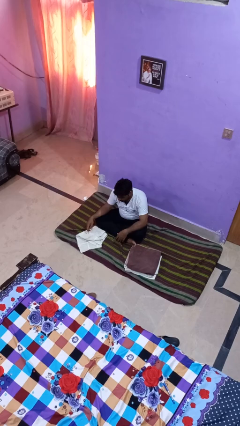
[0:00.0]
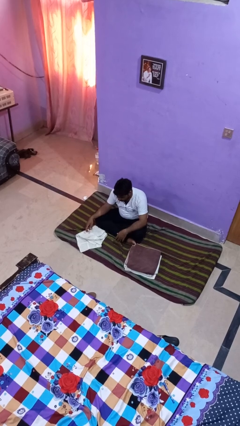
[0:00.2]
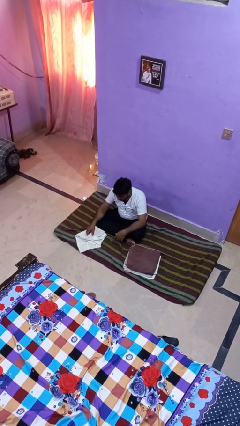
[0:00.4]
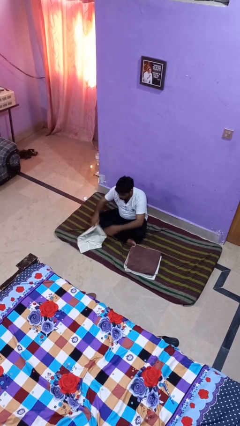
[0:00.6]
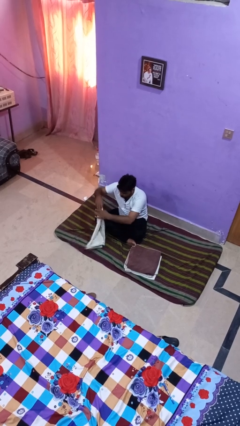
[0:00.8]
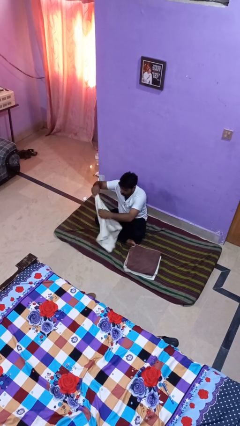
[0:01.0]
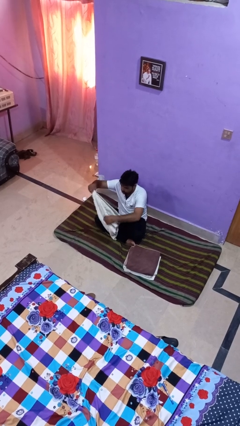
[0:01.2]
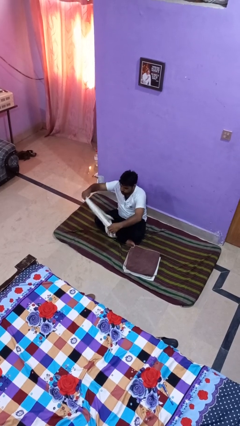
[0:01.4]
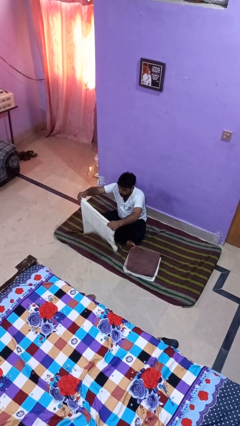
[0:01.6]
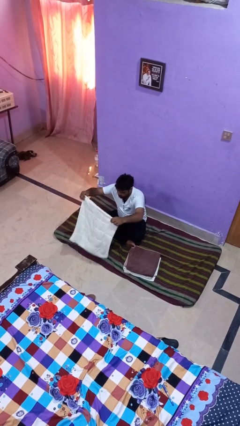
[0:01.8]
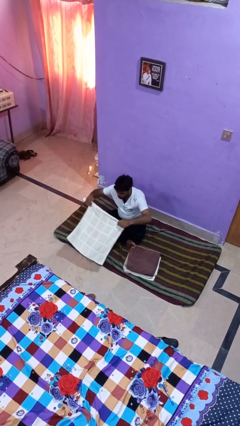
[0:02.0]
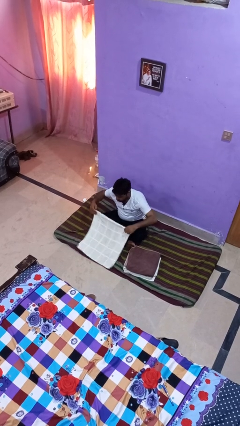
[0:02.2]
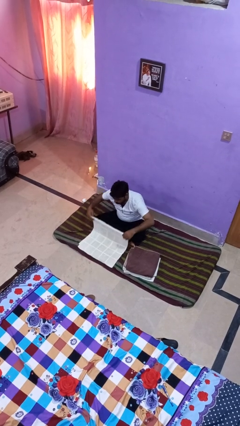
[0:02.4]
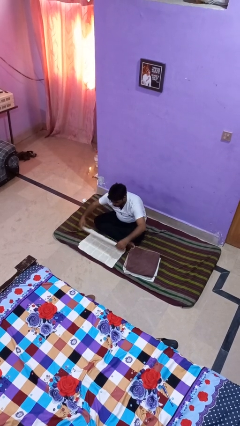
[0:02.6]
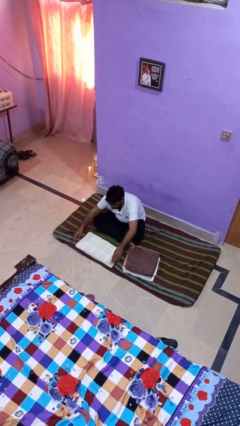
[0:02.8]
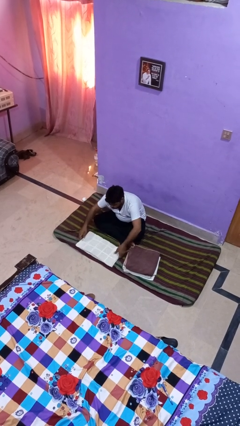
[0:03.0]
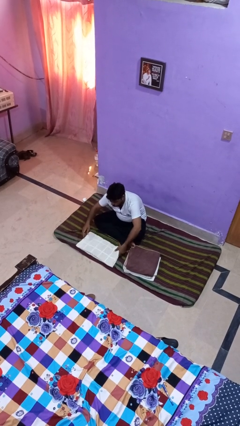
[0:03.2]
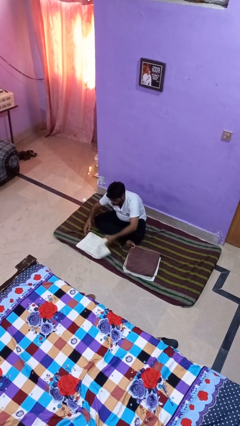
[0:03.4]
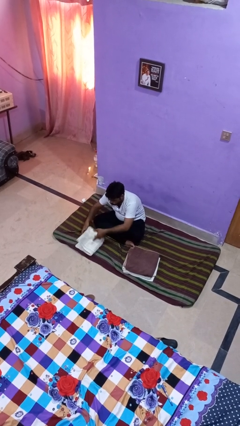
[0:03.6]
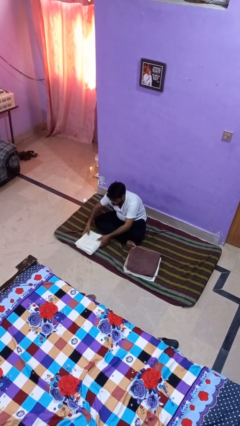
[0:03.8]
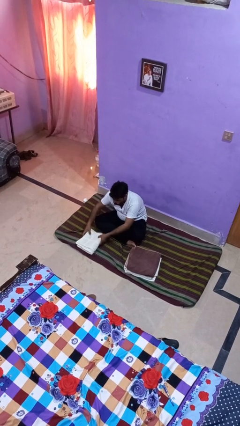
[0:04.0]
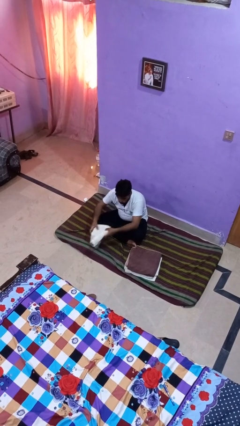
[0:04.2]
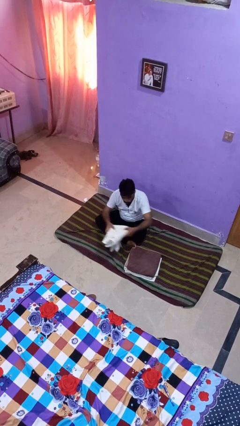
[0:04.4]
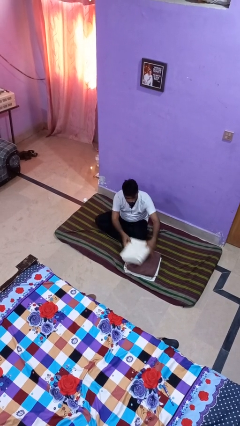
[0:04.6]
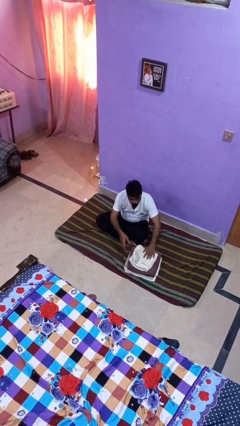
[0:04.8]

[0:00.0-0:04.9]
person folds towel

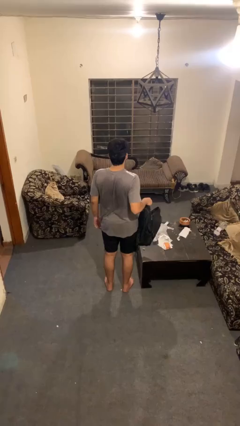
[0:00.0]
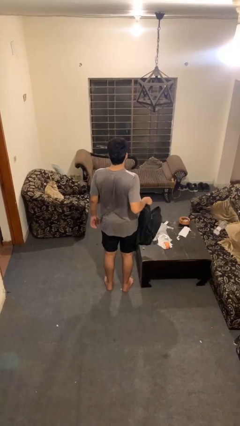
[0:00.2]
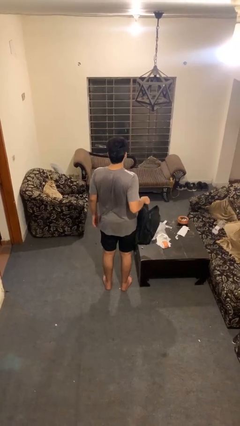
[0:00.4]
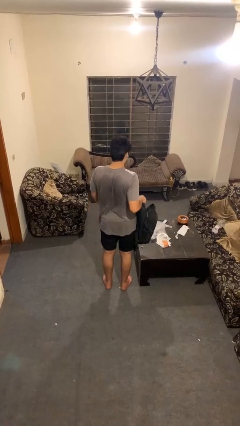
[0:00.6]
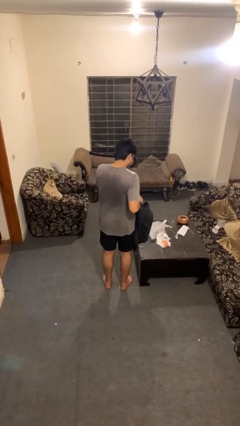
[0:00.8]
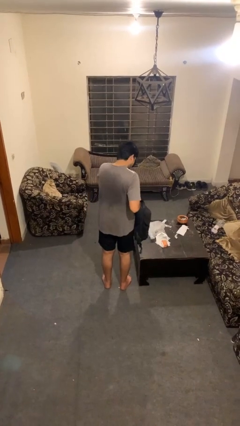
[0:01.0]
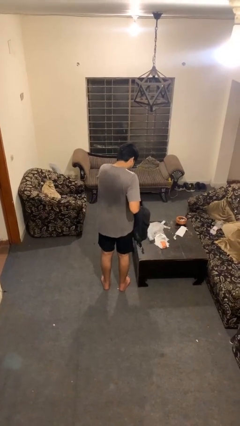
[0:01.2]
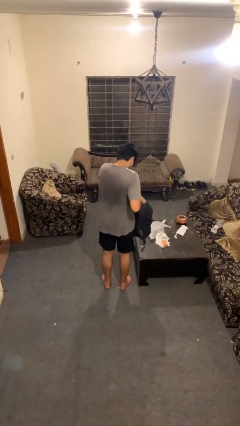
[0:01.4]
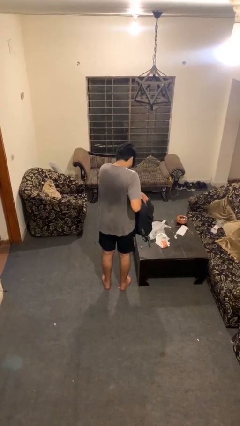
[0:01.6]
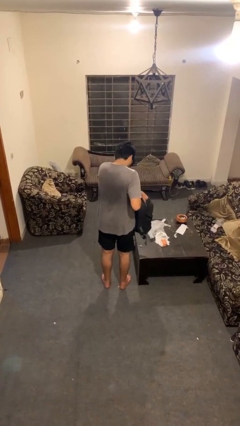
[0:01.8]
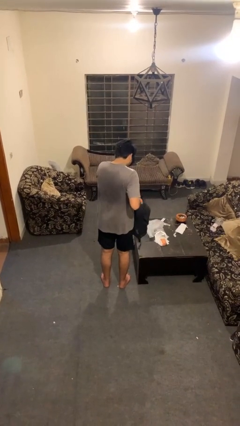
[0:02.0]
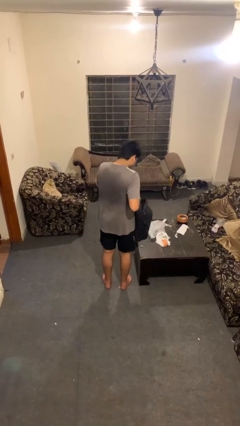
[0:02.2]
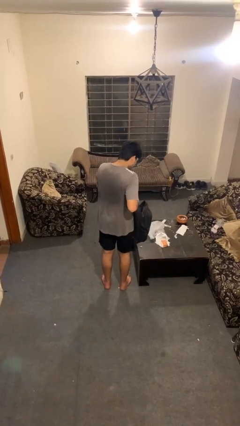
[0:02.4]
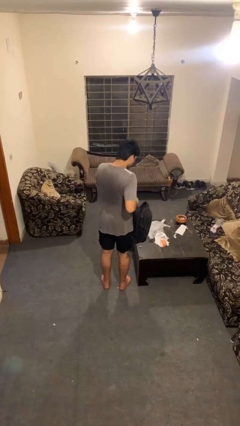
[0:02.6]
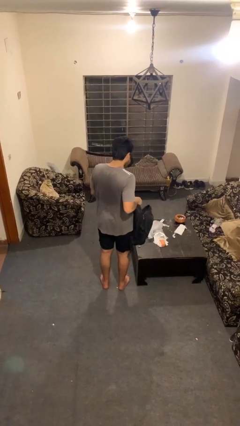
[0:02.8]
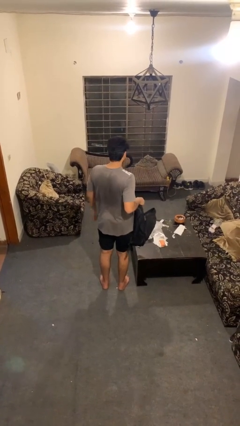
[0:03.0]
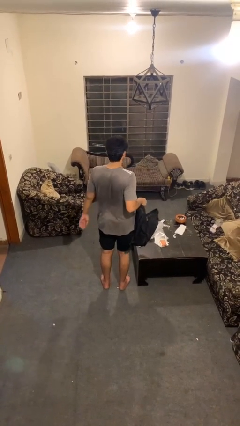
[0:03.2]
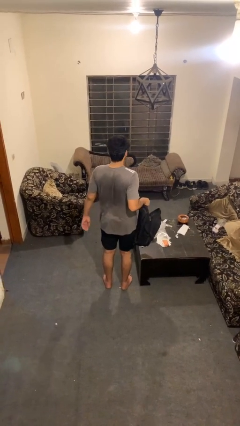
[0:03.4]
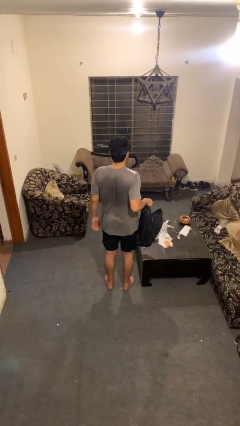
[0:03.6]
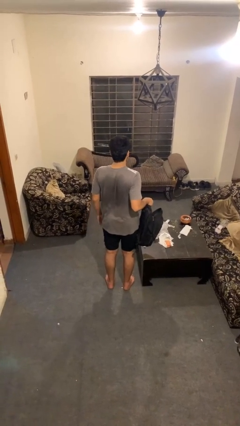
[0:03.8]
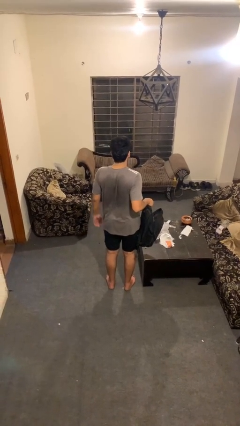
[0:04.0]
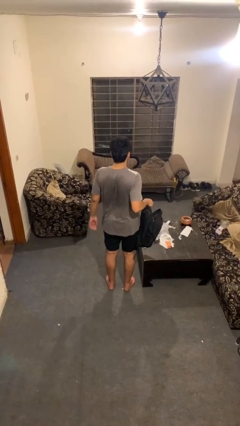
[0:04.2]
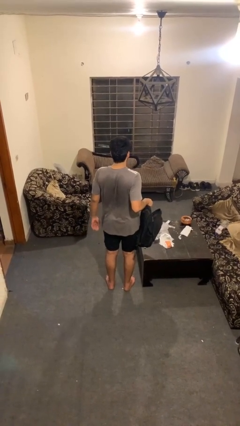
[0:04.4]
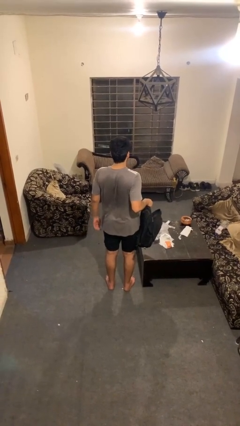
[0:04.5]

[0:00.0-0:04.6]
person searches in bag

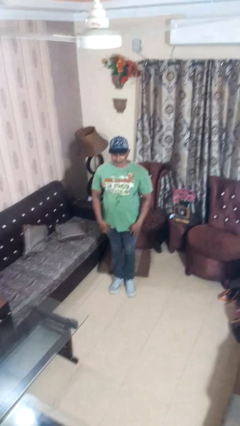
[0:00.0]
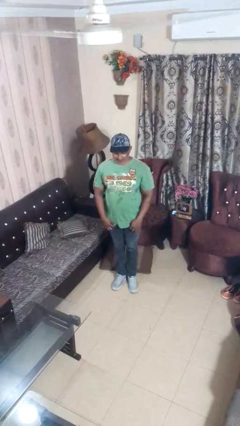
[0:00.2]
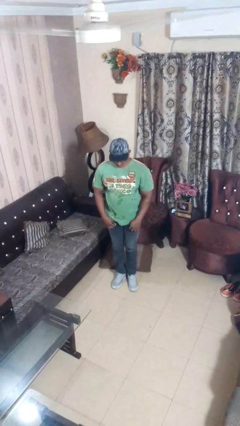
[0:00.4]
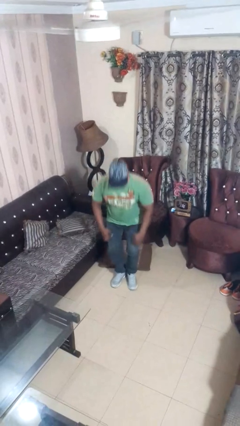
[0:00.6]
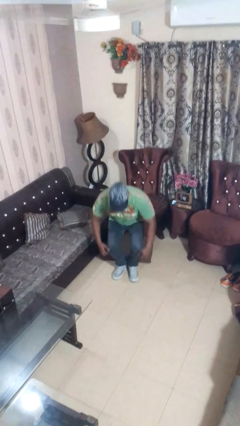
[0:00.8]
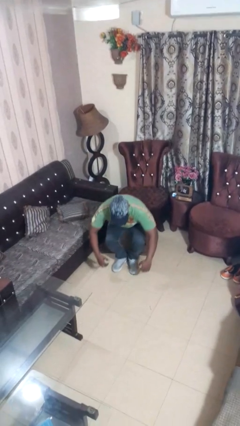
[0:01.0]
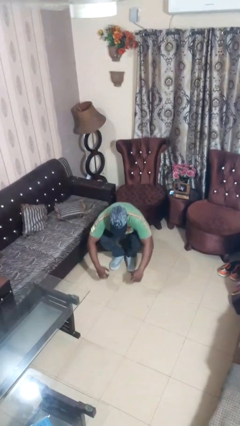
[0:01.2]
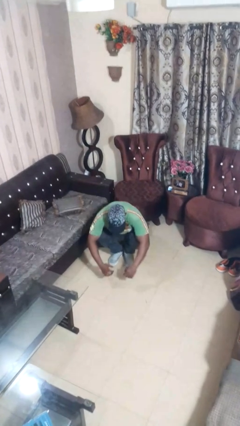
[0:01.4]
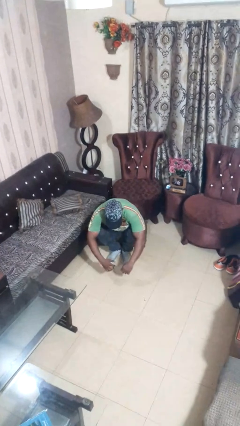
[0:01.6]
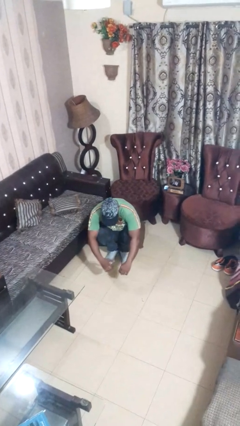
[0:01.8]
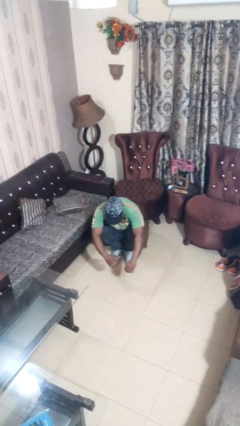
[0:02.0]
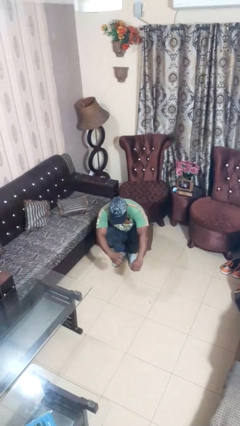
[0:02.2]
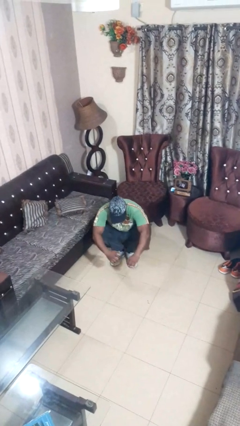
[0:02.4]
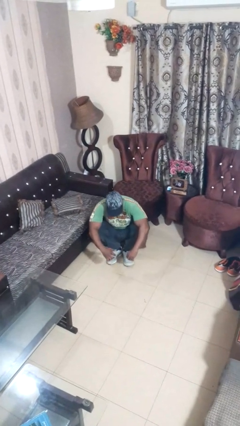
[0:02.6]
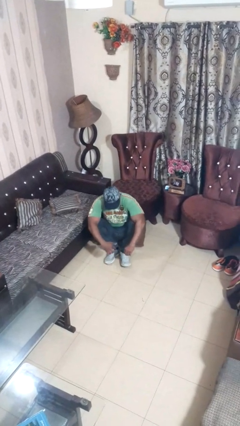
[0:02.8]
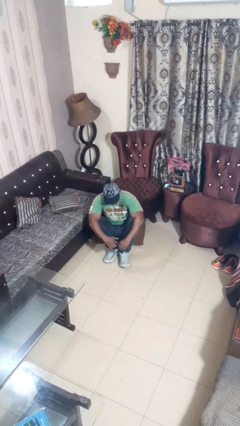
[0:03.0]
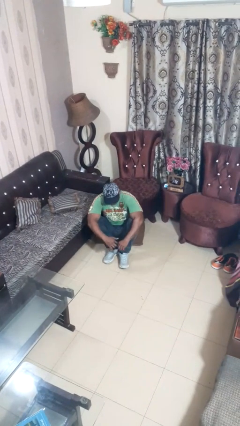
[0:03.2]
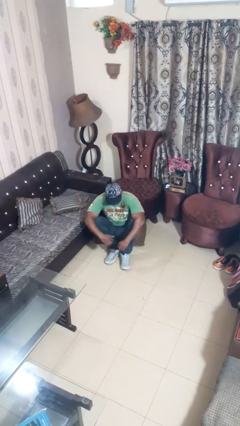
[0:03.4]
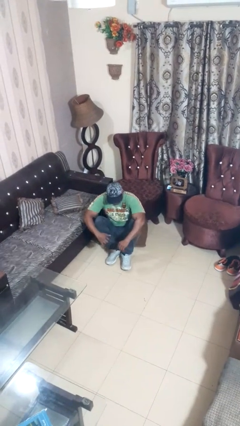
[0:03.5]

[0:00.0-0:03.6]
person sits crisscross

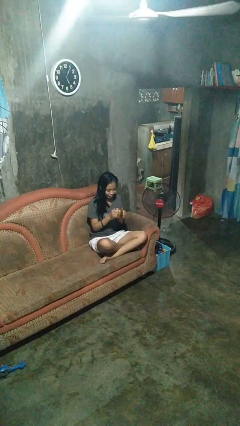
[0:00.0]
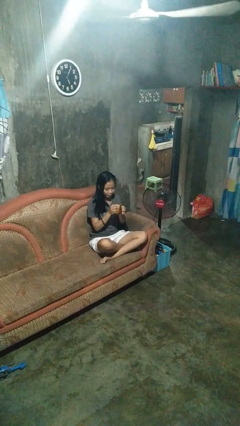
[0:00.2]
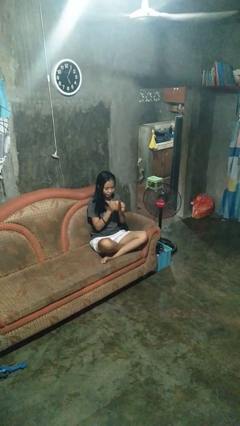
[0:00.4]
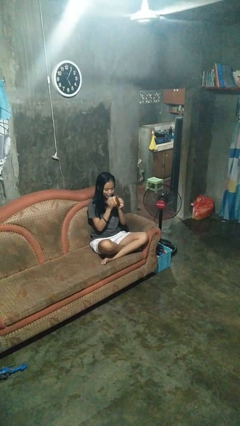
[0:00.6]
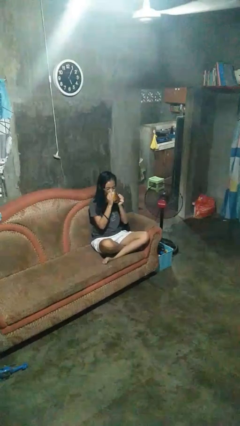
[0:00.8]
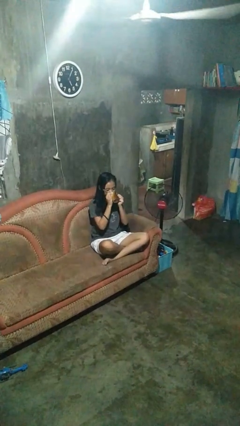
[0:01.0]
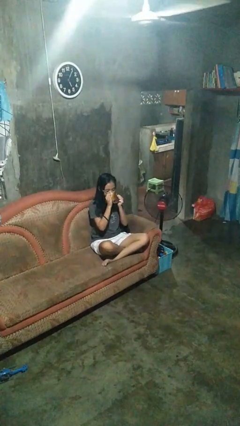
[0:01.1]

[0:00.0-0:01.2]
person drinks from mug

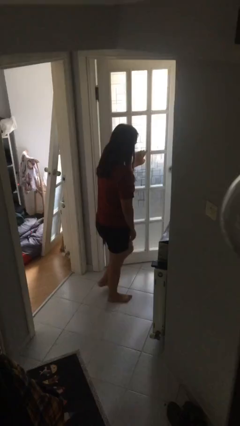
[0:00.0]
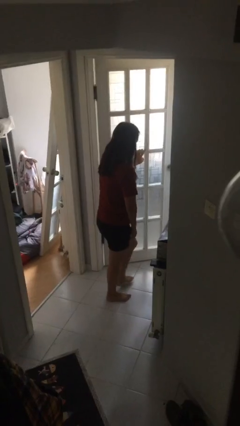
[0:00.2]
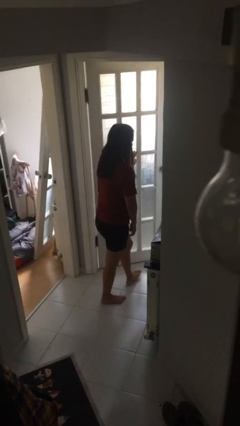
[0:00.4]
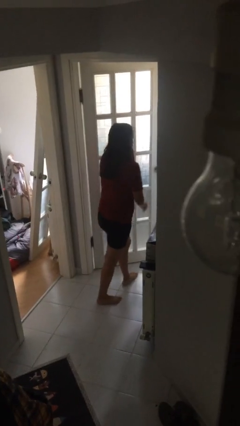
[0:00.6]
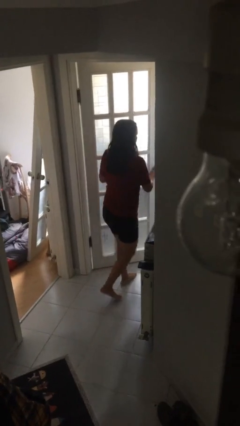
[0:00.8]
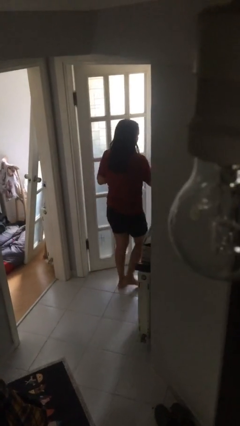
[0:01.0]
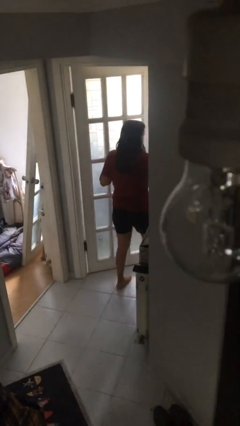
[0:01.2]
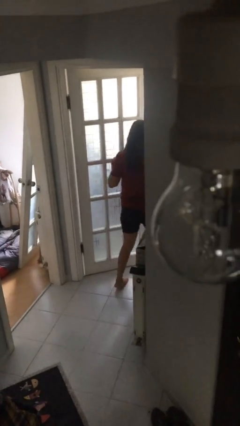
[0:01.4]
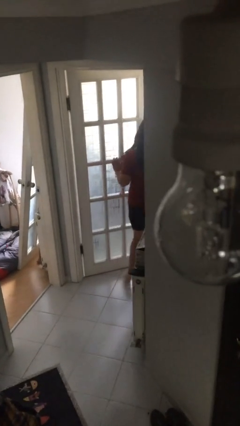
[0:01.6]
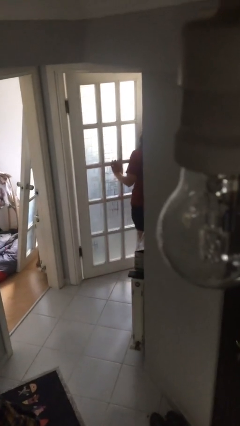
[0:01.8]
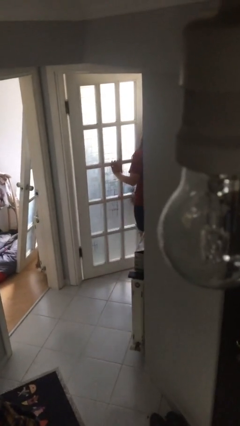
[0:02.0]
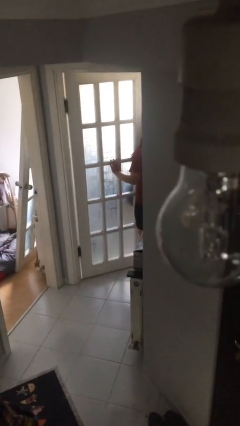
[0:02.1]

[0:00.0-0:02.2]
person exits scene through structure

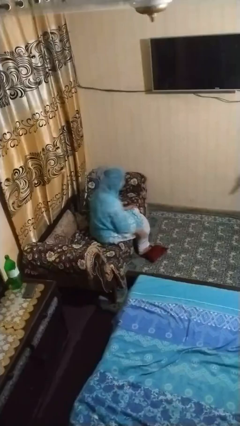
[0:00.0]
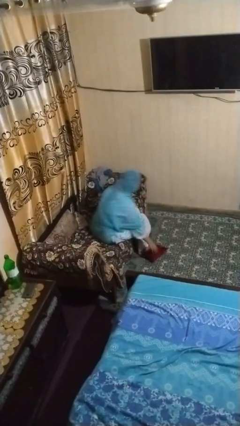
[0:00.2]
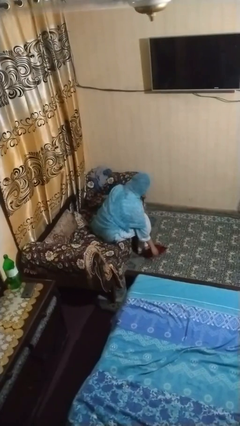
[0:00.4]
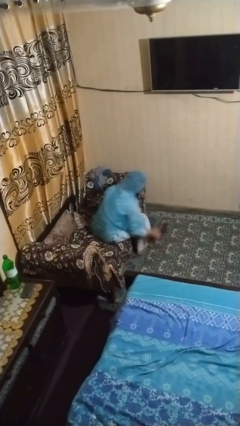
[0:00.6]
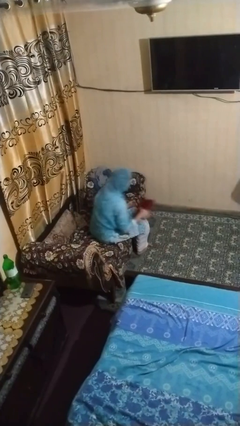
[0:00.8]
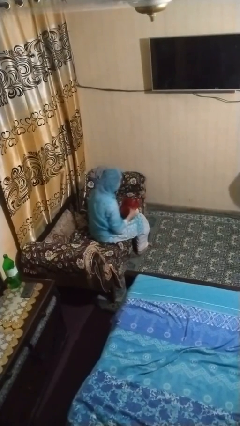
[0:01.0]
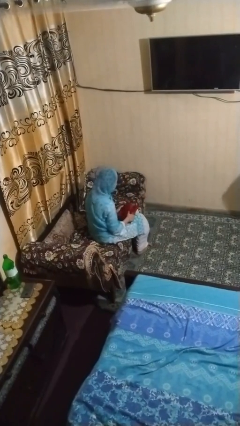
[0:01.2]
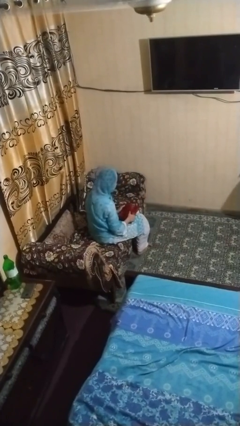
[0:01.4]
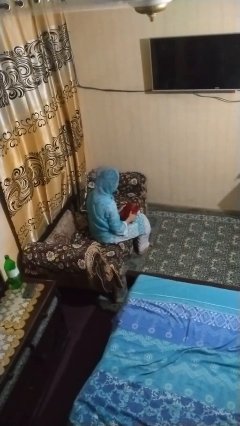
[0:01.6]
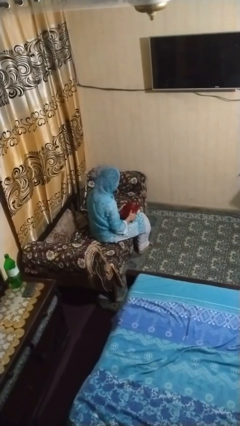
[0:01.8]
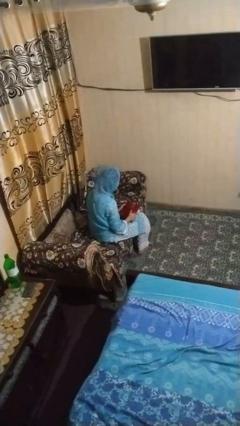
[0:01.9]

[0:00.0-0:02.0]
person picks up object from floor
